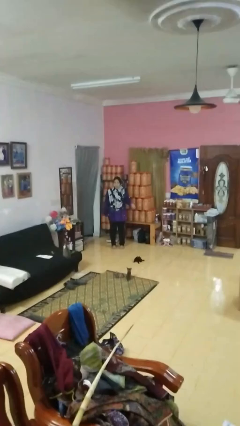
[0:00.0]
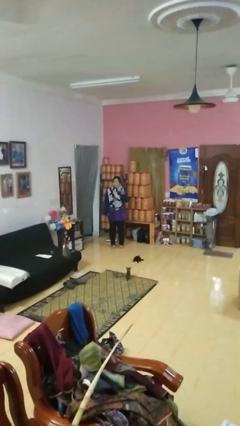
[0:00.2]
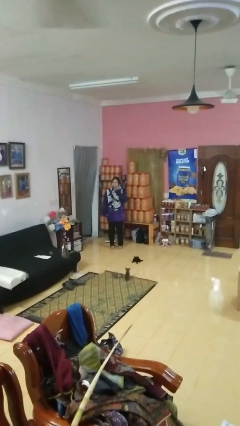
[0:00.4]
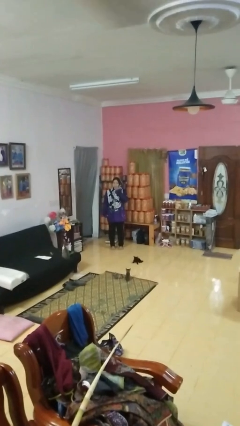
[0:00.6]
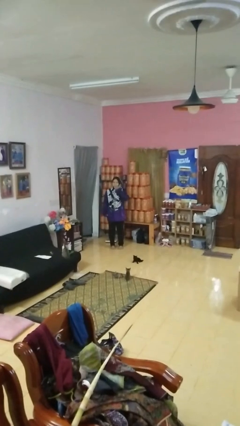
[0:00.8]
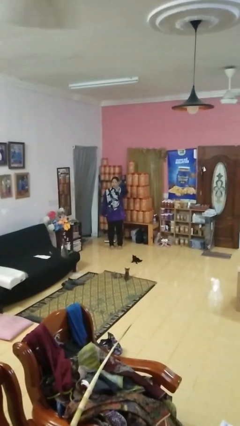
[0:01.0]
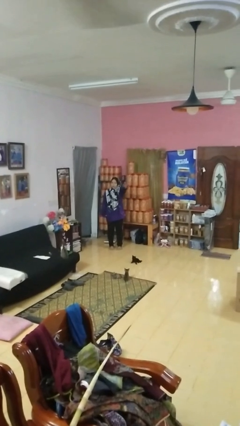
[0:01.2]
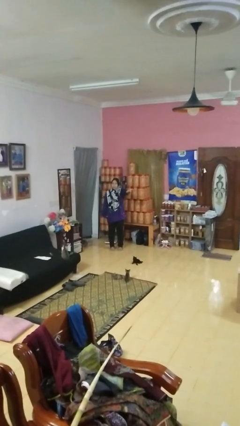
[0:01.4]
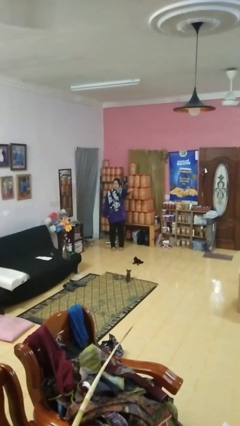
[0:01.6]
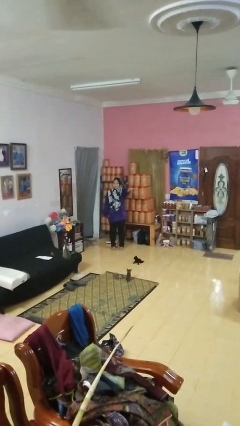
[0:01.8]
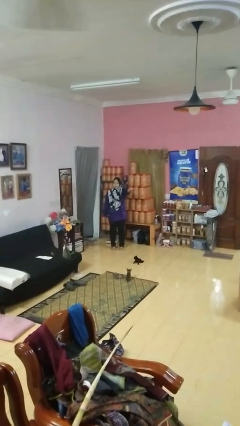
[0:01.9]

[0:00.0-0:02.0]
person gestures blow kiss

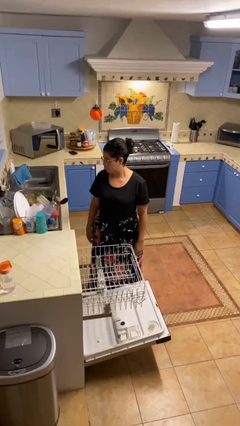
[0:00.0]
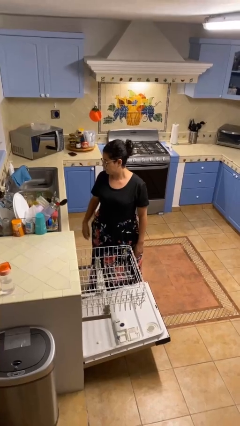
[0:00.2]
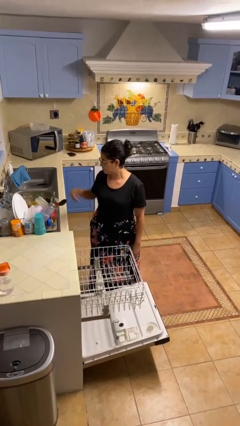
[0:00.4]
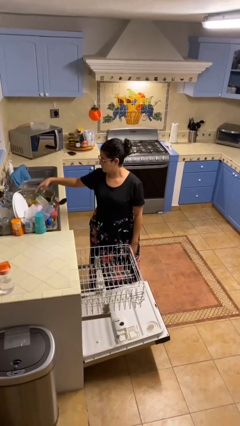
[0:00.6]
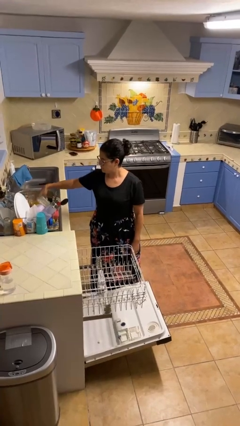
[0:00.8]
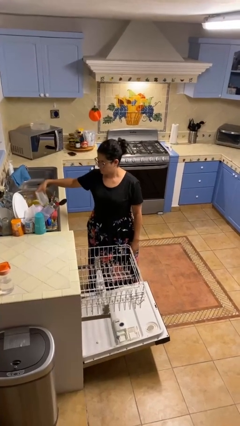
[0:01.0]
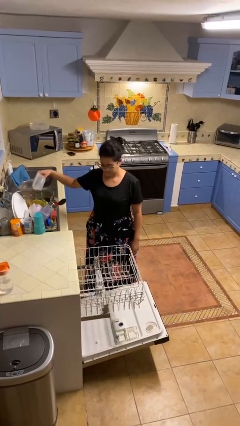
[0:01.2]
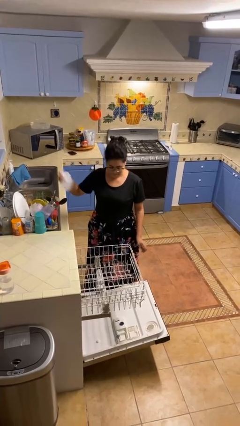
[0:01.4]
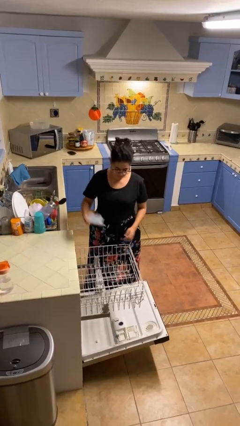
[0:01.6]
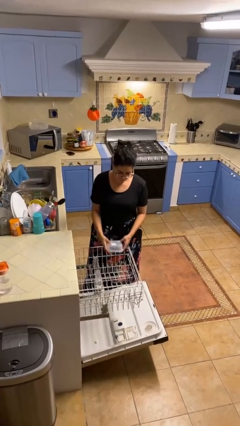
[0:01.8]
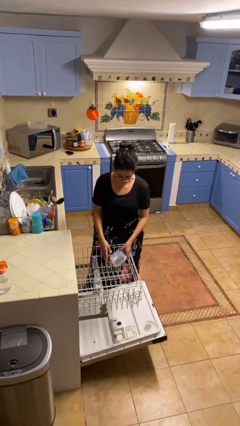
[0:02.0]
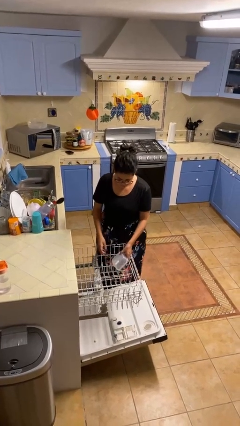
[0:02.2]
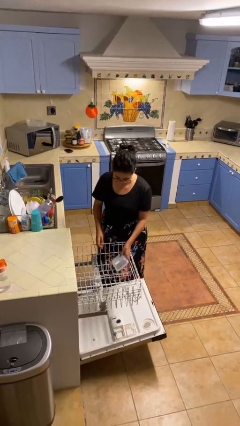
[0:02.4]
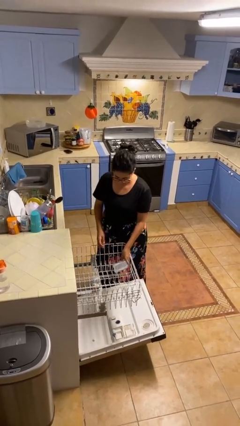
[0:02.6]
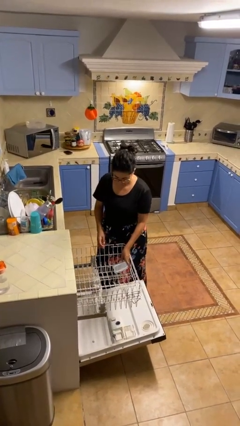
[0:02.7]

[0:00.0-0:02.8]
person loads dishwasher

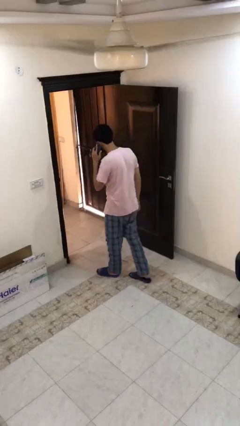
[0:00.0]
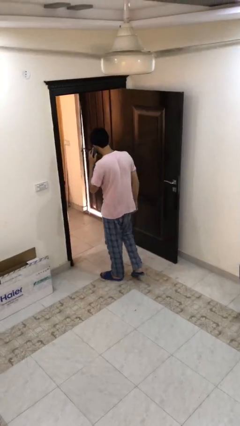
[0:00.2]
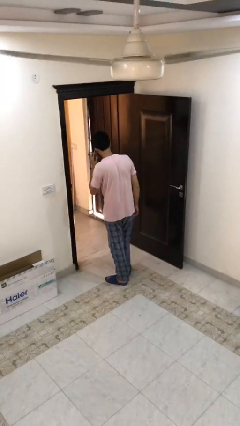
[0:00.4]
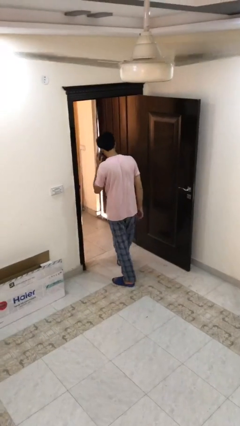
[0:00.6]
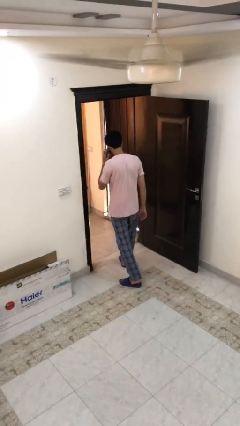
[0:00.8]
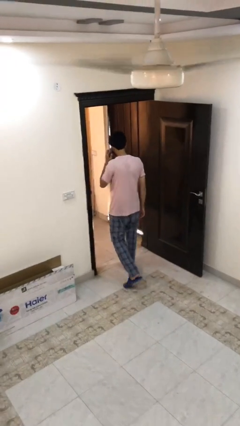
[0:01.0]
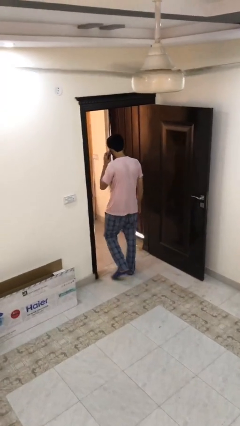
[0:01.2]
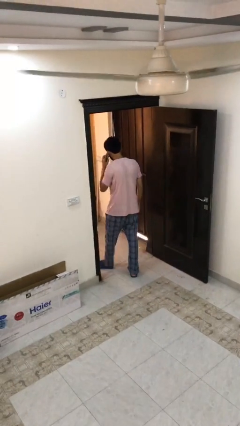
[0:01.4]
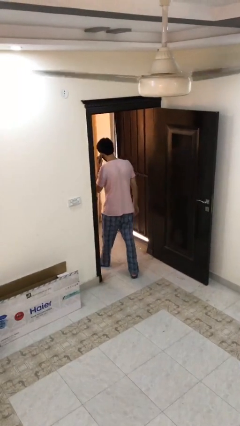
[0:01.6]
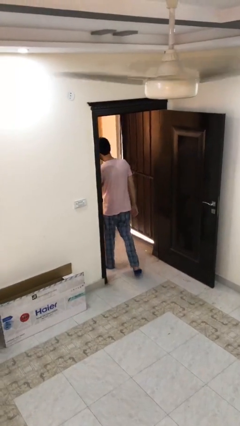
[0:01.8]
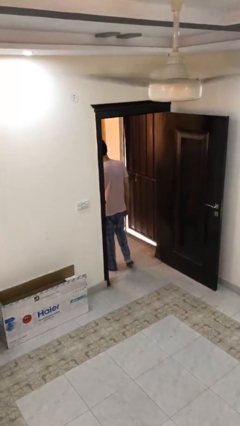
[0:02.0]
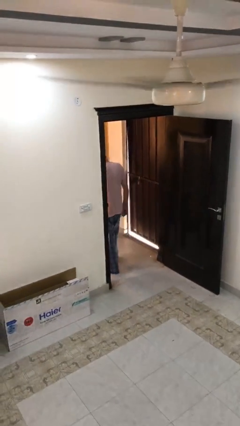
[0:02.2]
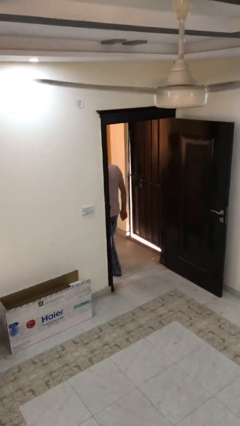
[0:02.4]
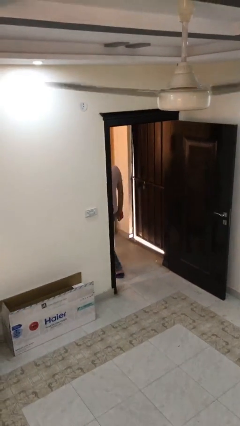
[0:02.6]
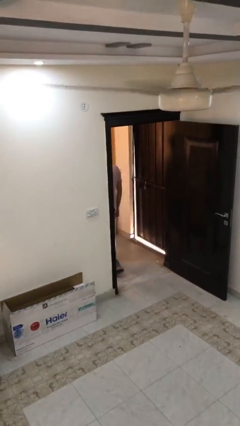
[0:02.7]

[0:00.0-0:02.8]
person exits scene through structure

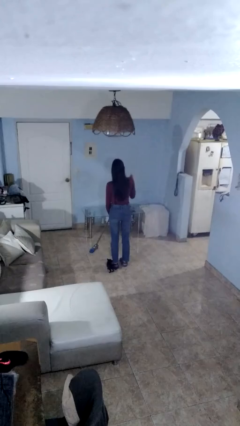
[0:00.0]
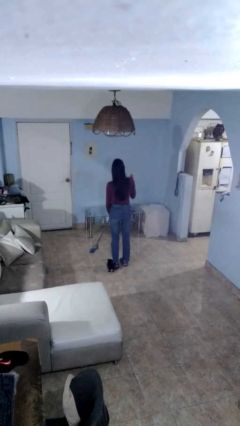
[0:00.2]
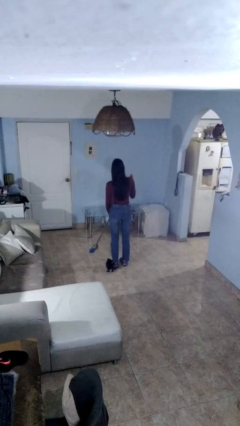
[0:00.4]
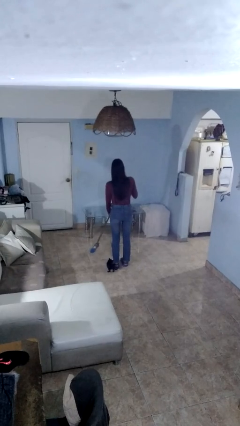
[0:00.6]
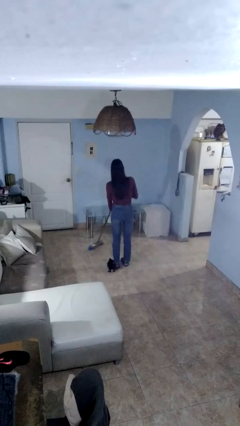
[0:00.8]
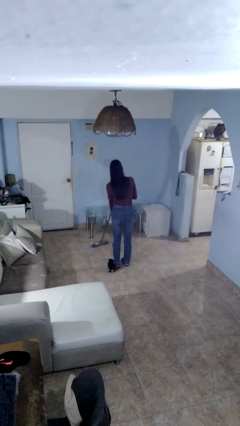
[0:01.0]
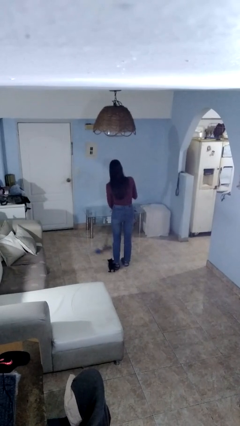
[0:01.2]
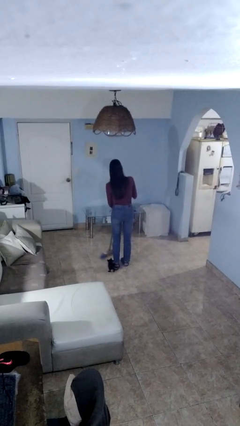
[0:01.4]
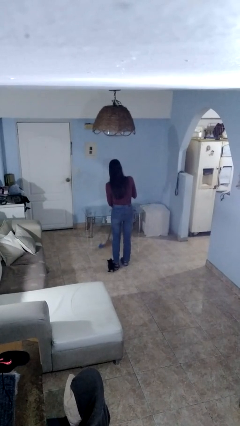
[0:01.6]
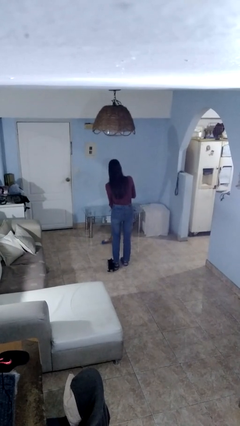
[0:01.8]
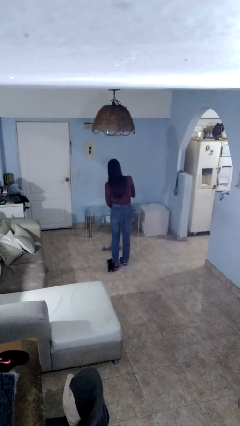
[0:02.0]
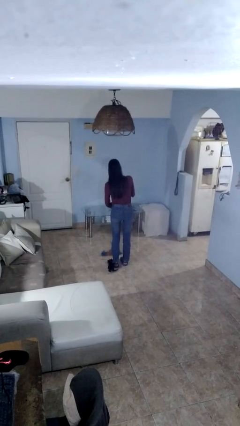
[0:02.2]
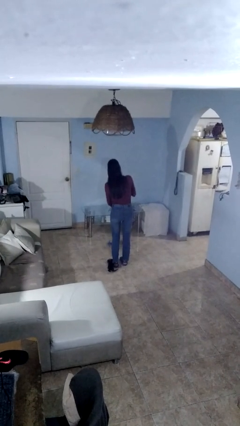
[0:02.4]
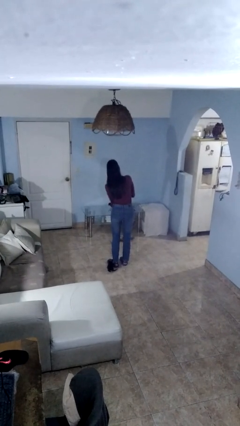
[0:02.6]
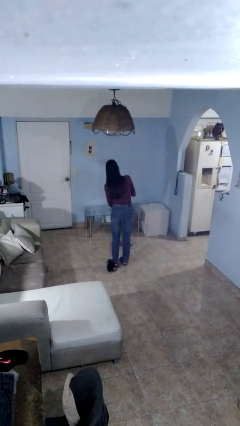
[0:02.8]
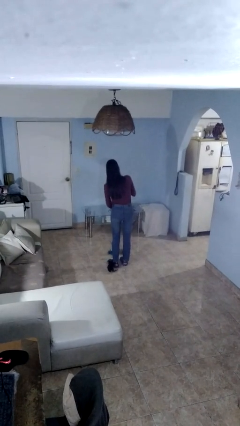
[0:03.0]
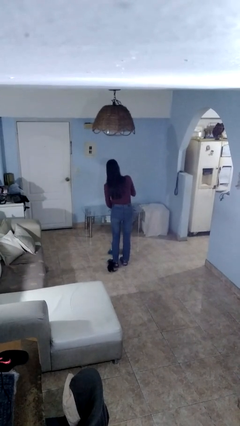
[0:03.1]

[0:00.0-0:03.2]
person sweeps floor

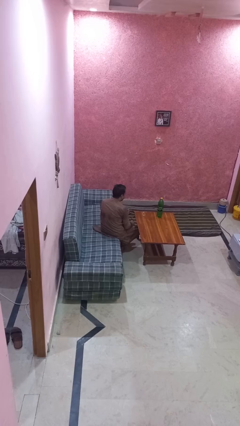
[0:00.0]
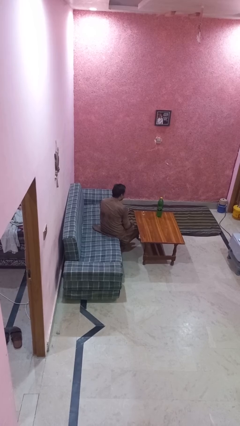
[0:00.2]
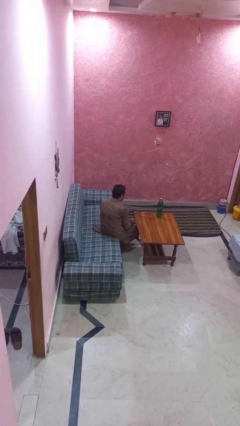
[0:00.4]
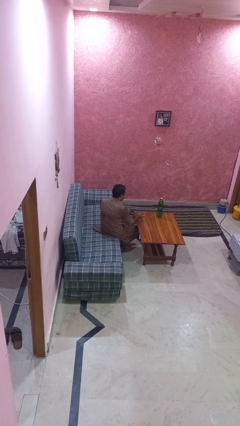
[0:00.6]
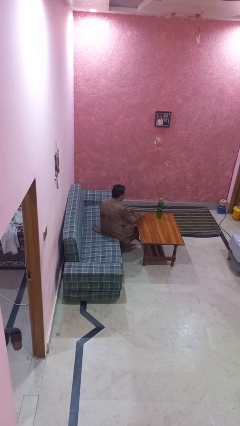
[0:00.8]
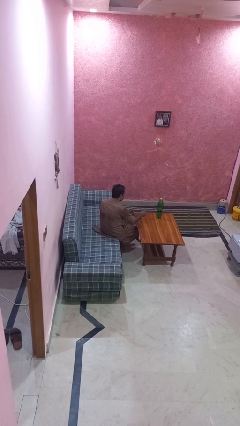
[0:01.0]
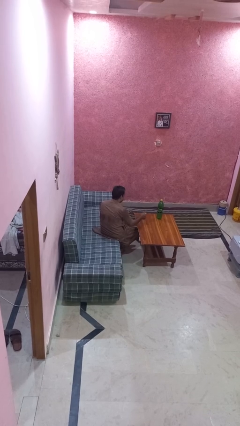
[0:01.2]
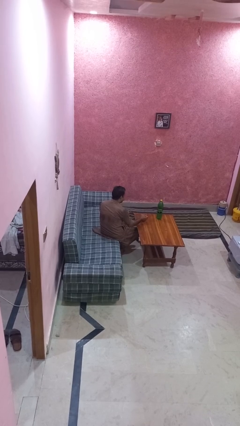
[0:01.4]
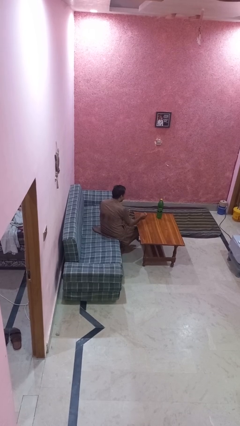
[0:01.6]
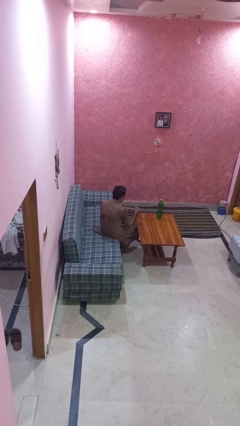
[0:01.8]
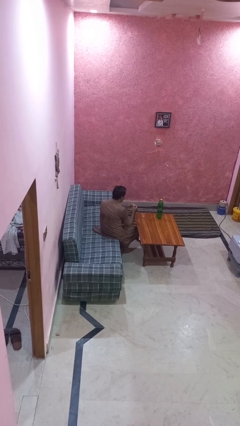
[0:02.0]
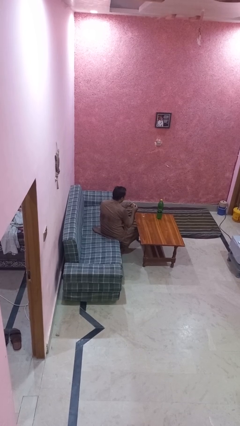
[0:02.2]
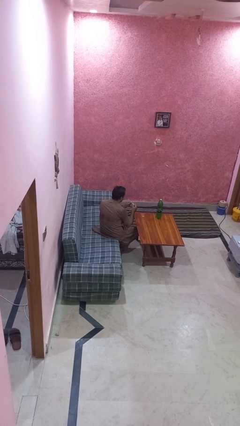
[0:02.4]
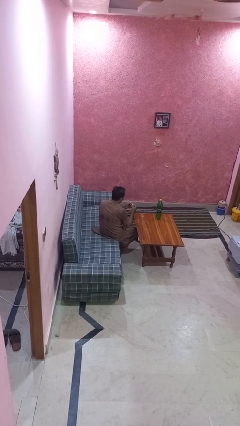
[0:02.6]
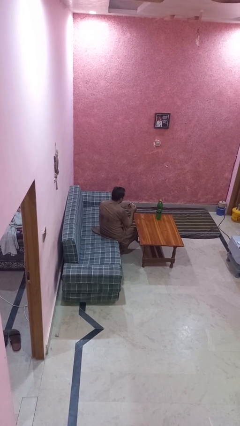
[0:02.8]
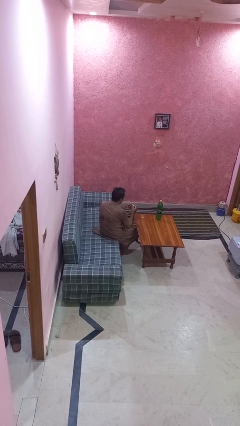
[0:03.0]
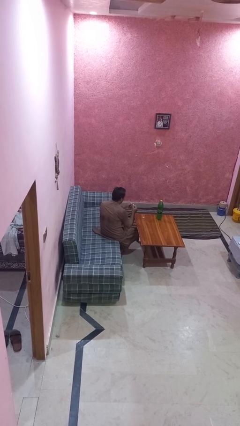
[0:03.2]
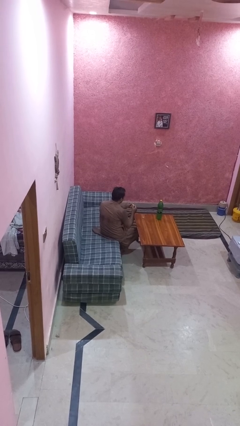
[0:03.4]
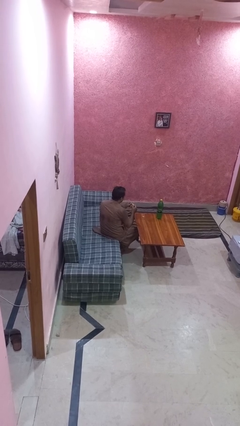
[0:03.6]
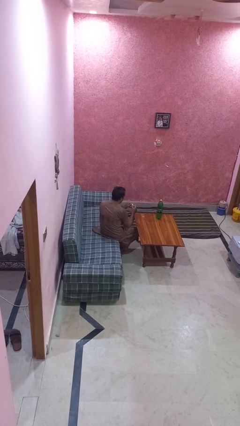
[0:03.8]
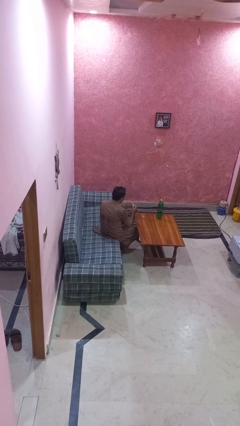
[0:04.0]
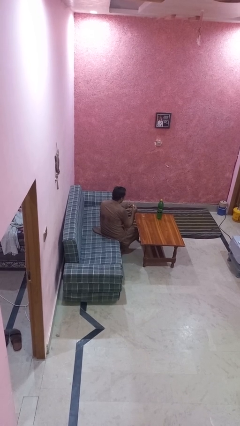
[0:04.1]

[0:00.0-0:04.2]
person paints fingernails

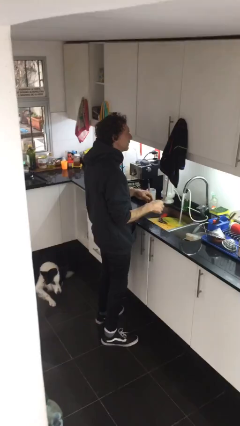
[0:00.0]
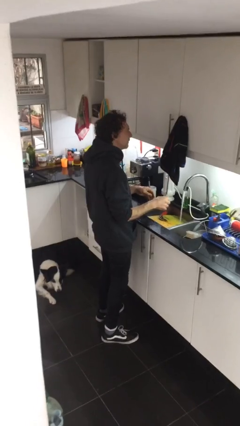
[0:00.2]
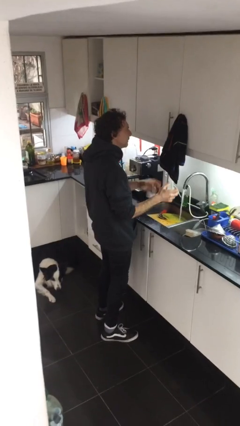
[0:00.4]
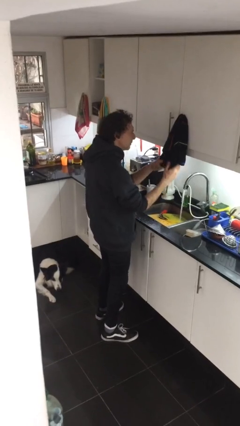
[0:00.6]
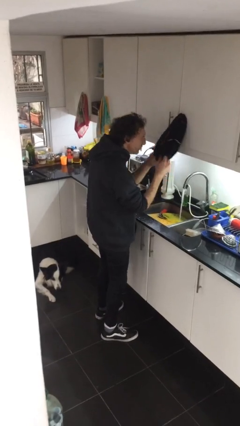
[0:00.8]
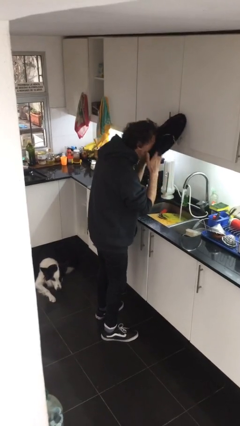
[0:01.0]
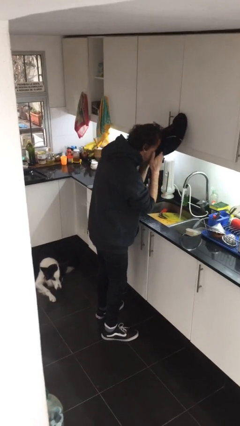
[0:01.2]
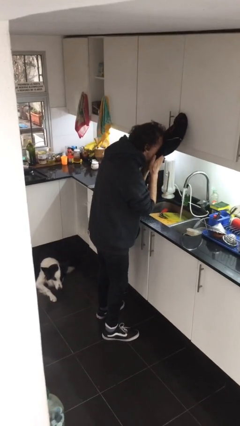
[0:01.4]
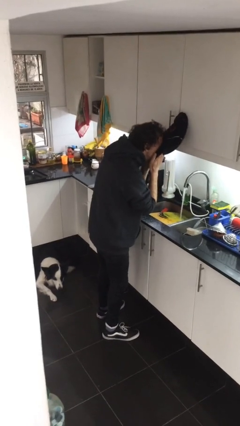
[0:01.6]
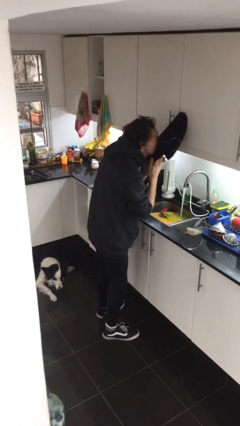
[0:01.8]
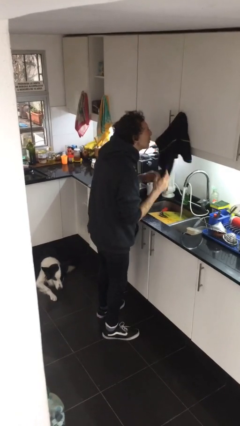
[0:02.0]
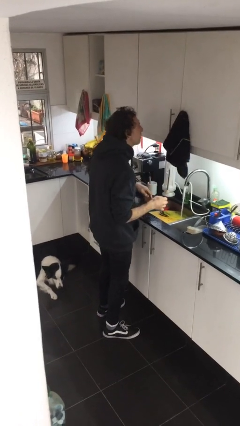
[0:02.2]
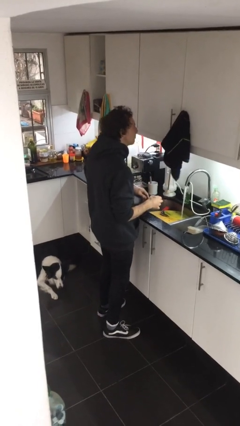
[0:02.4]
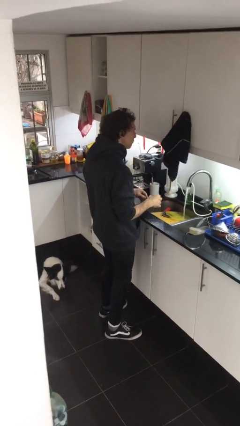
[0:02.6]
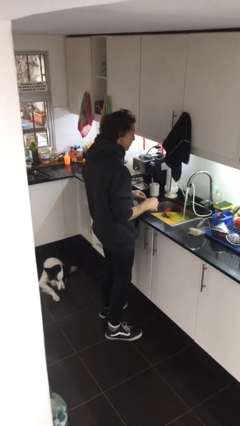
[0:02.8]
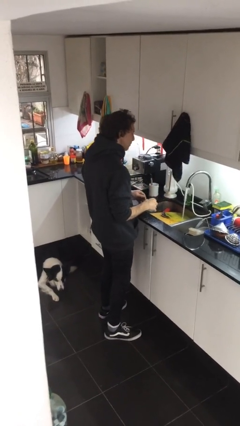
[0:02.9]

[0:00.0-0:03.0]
person dries face with towel
